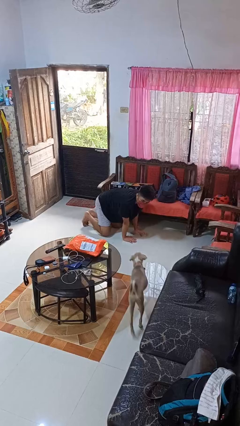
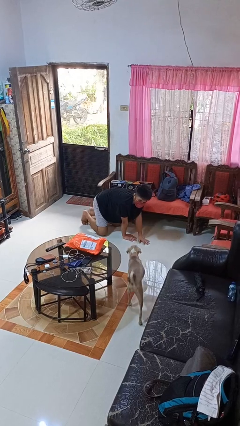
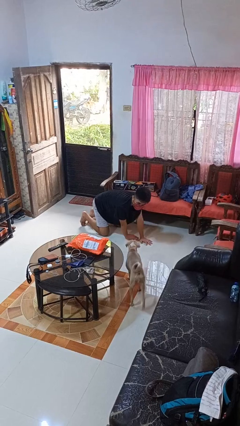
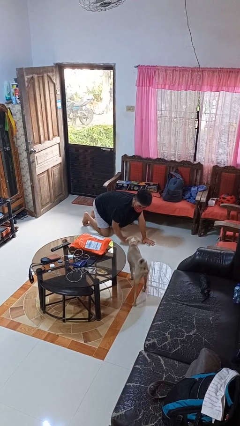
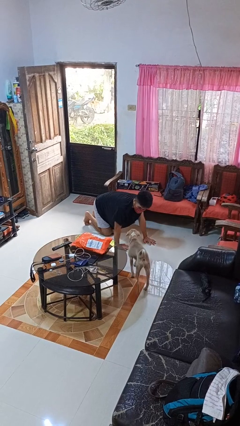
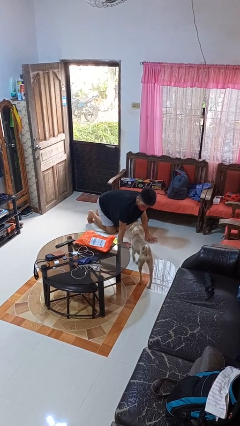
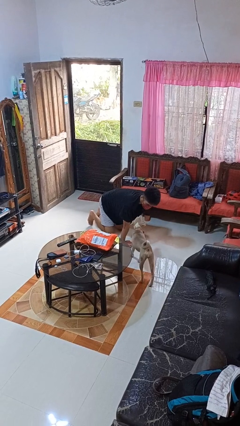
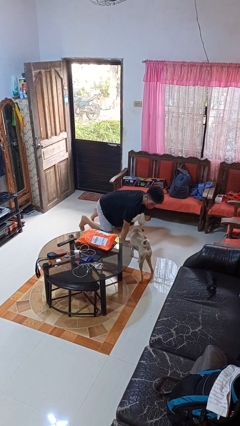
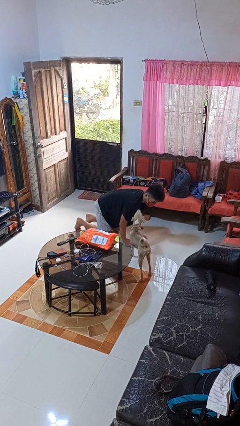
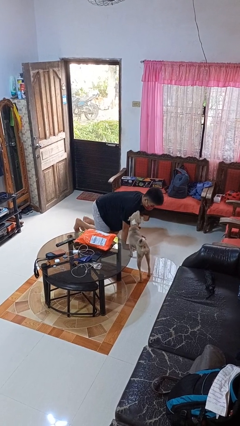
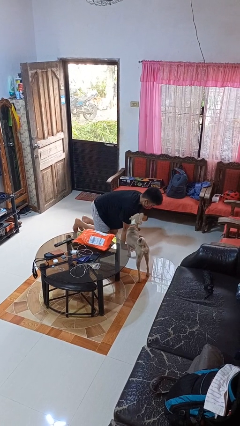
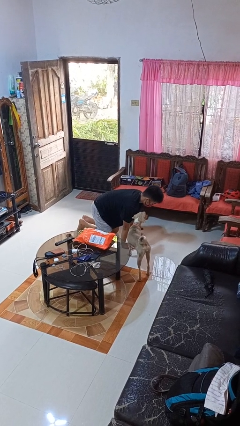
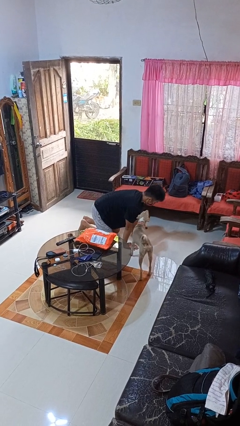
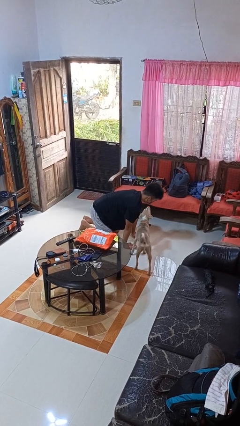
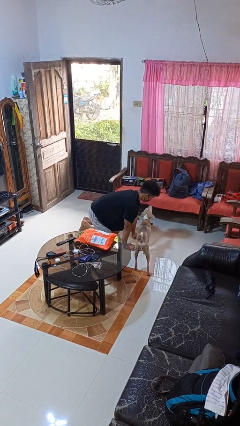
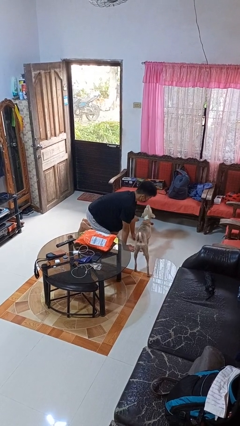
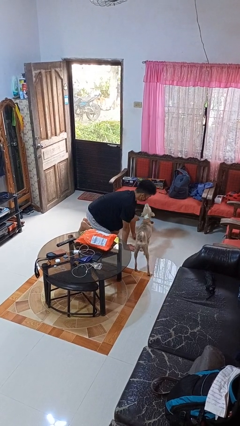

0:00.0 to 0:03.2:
person crawls

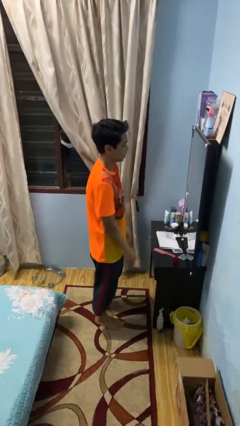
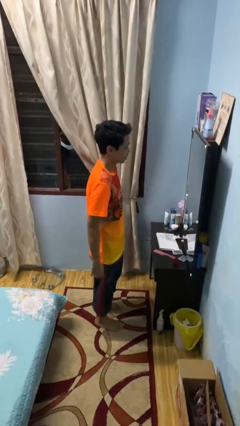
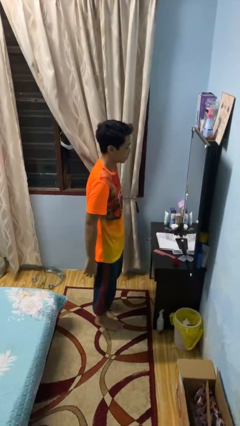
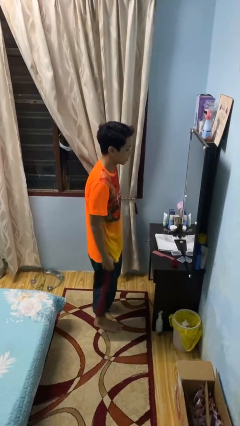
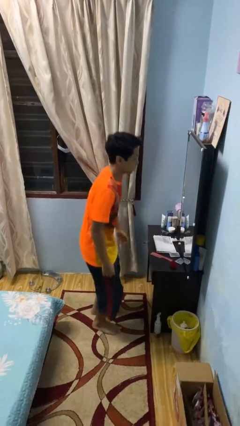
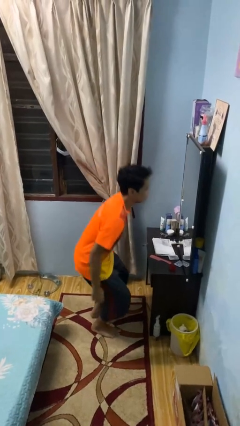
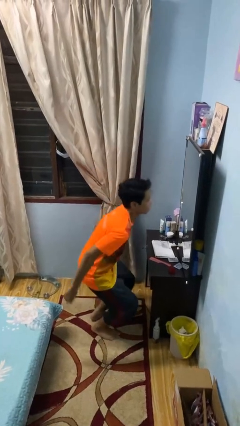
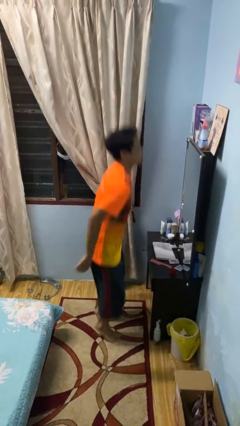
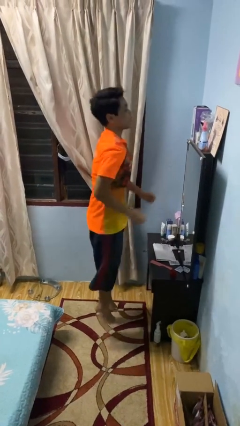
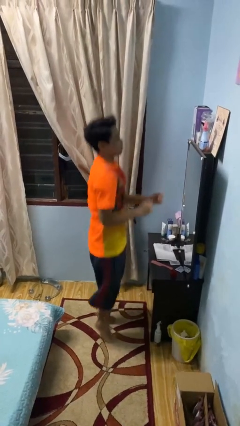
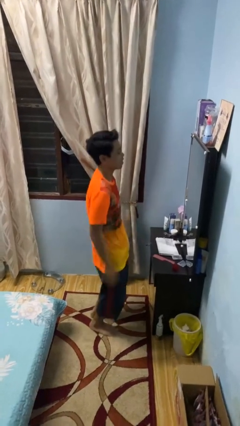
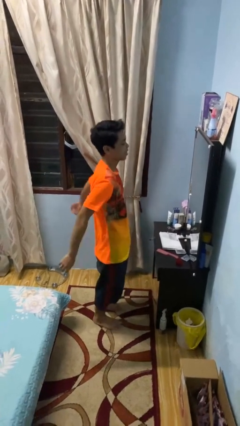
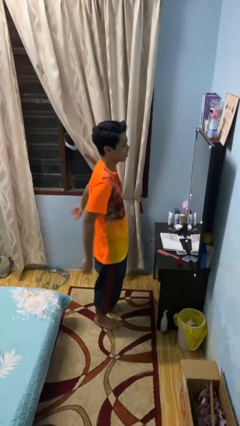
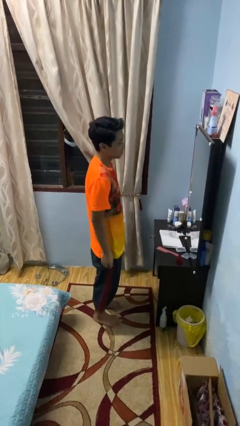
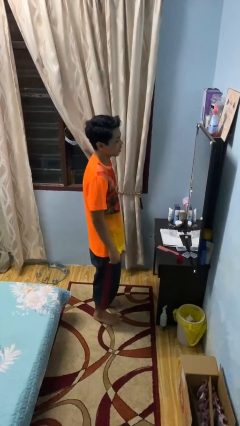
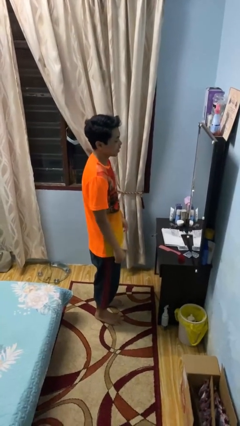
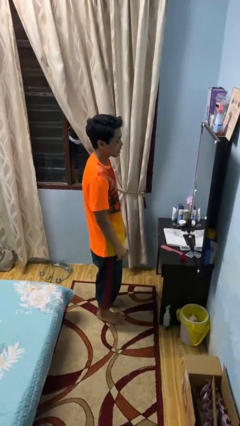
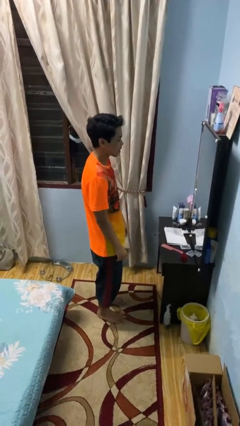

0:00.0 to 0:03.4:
person jumps

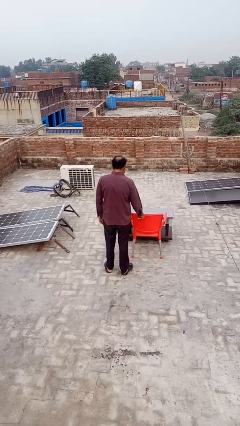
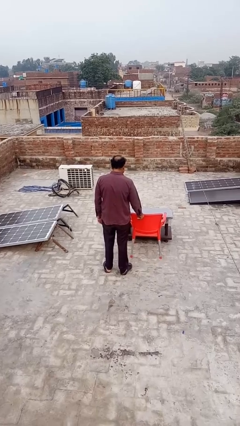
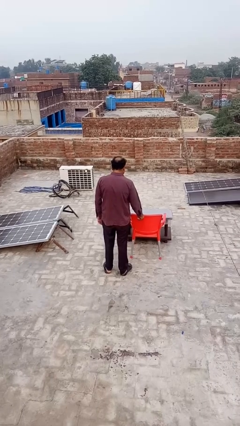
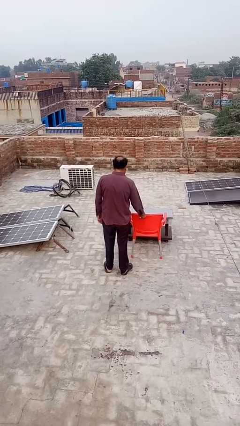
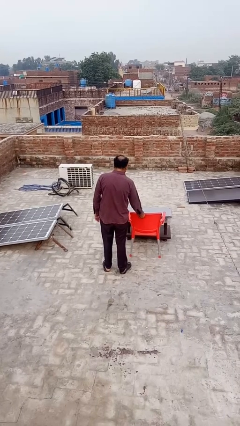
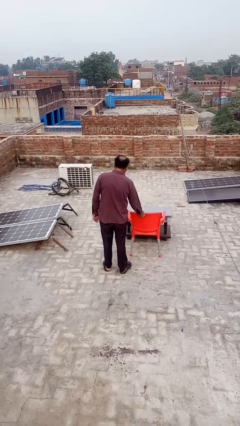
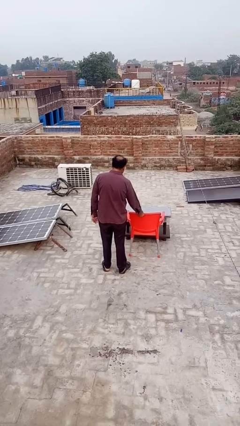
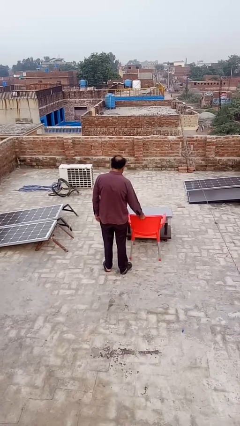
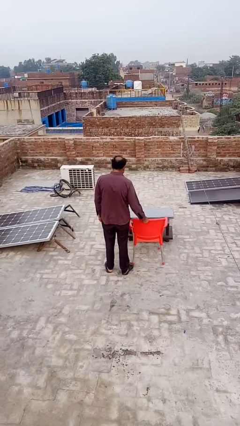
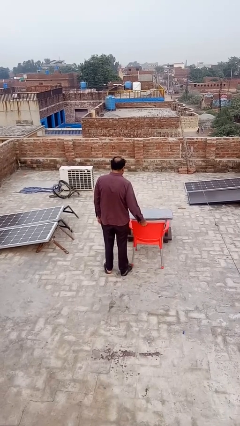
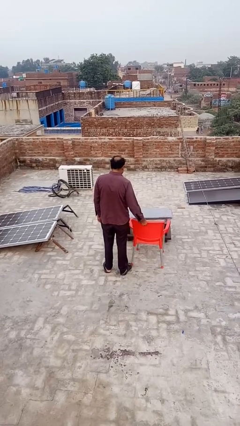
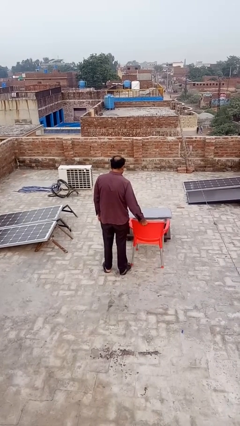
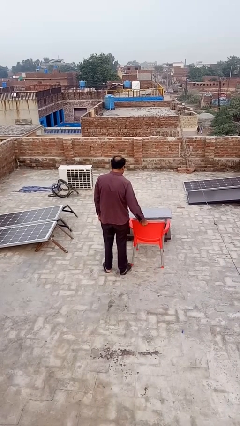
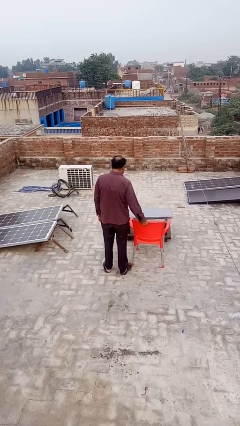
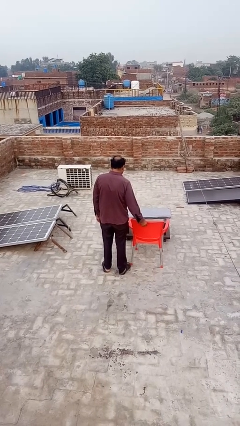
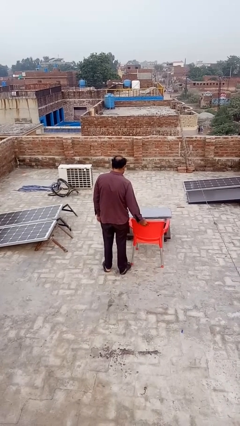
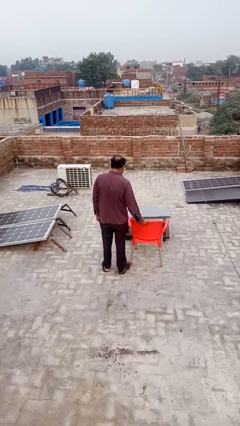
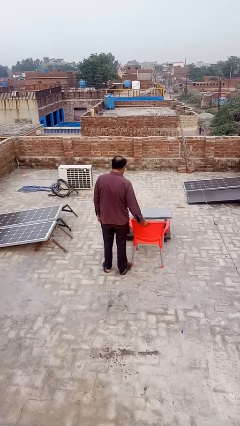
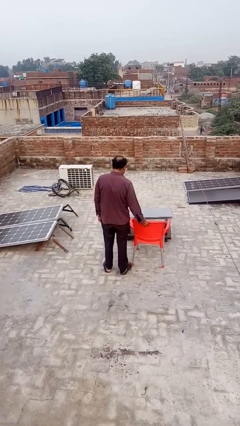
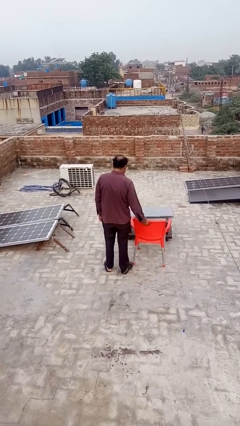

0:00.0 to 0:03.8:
person pulls out chair

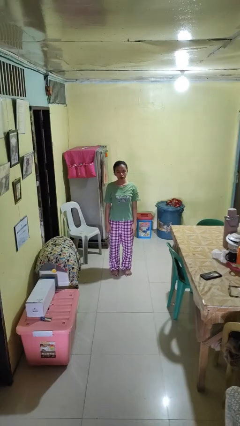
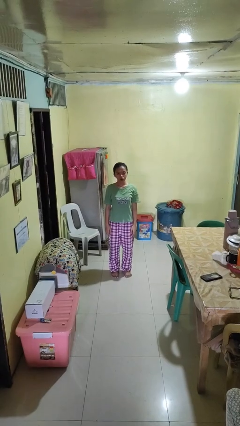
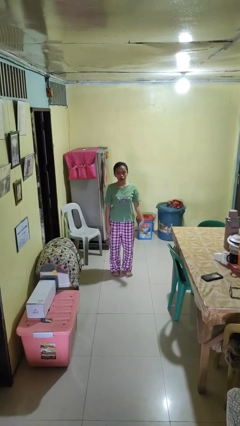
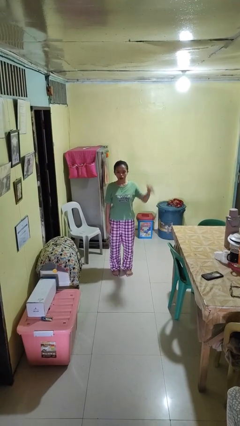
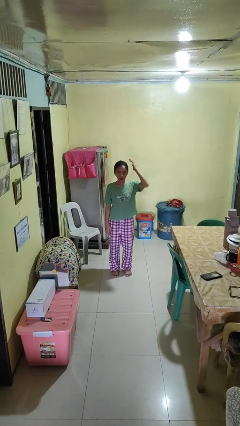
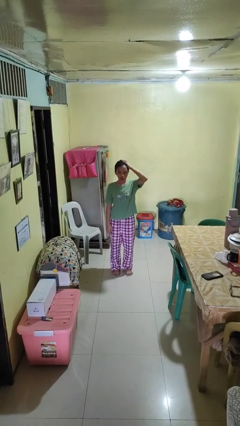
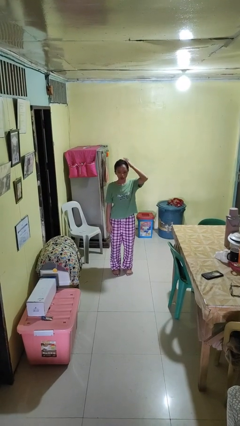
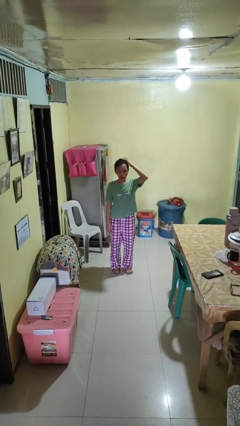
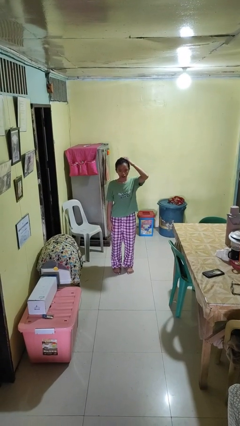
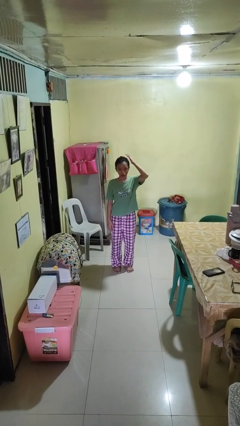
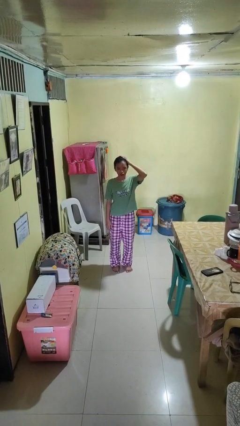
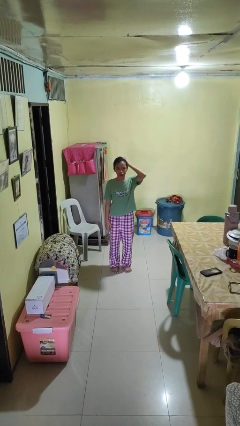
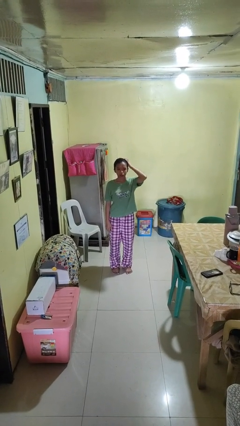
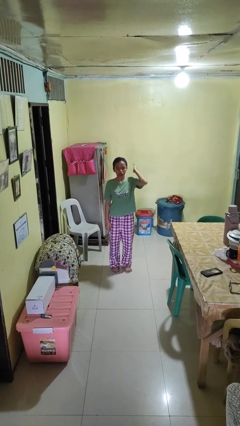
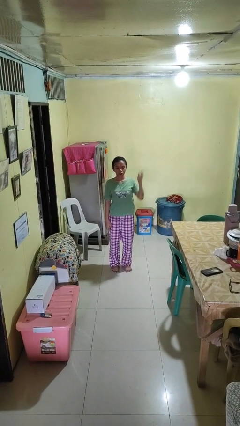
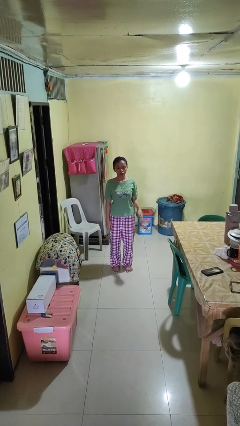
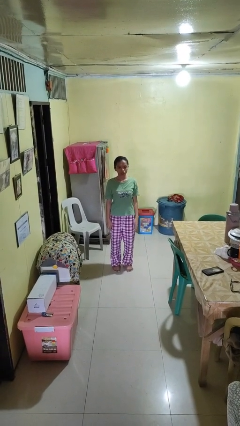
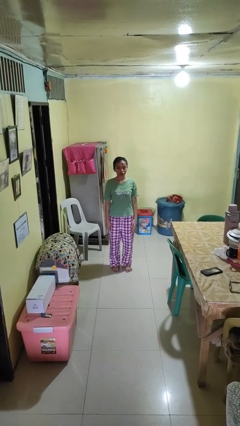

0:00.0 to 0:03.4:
person pats head

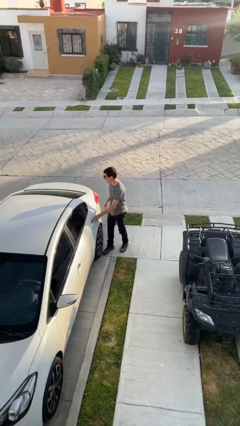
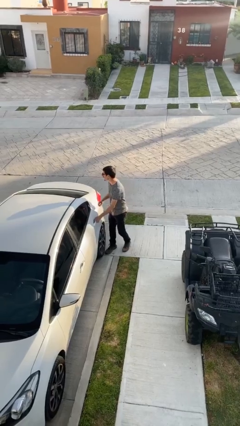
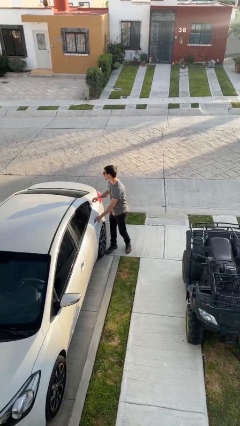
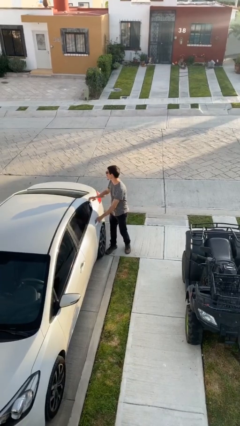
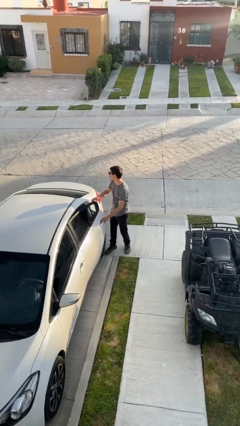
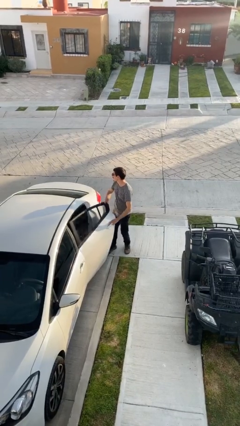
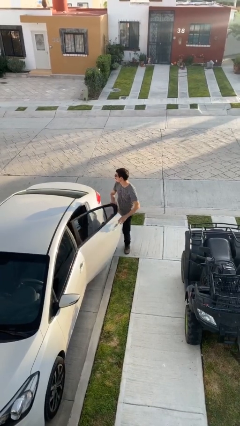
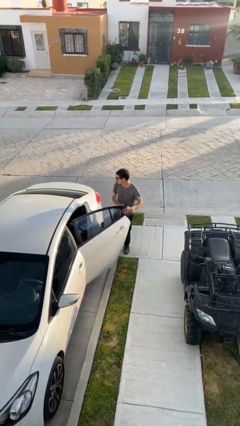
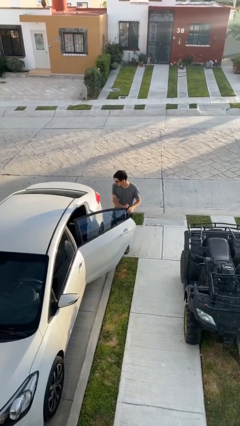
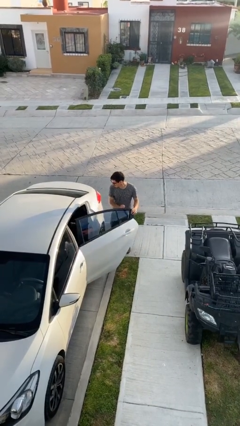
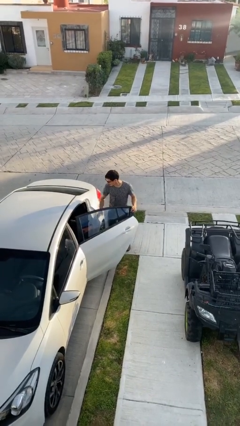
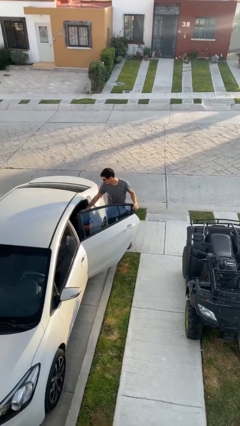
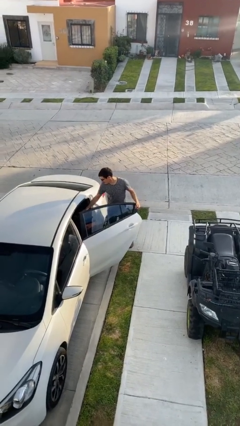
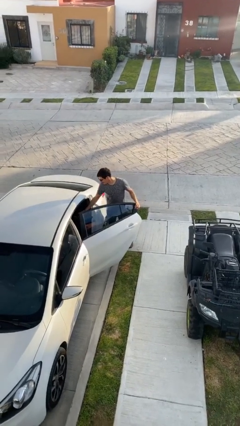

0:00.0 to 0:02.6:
person opens car door

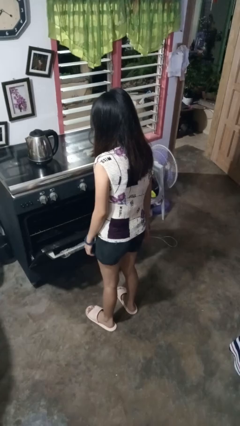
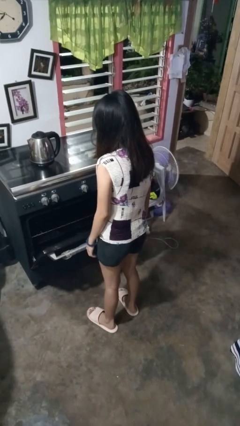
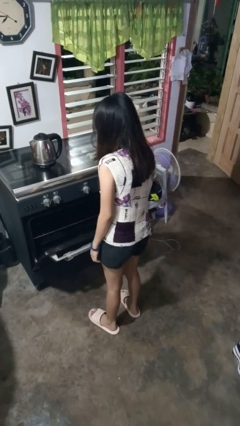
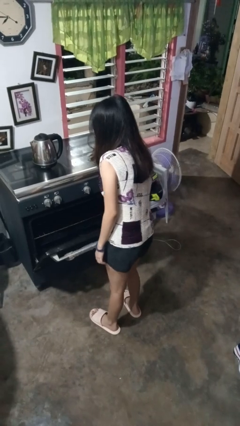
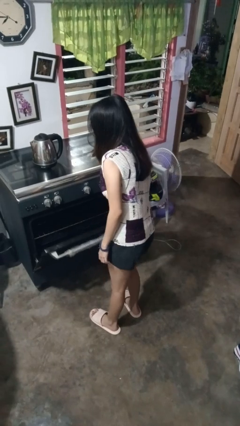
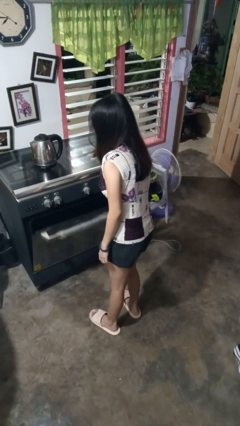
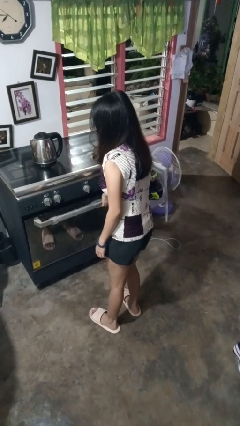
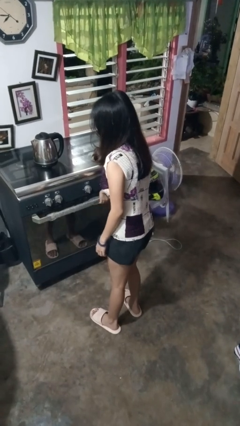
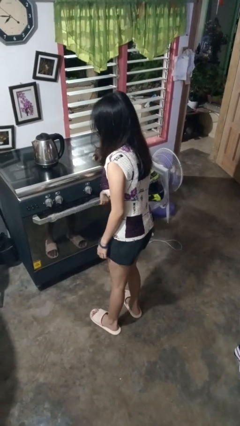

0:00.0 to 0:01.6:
person closes oven door
